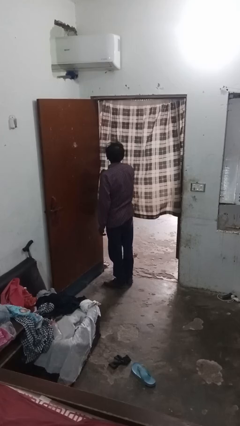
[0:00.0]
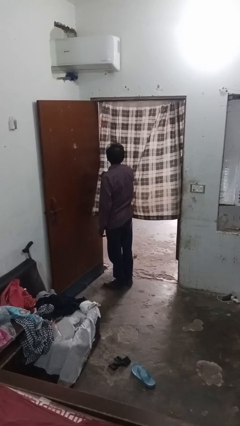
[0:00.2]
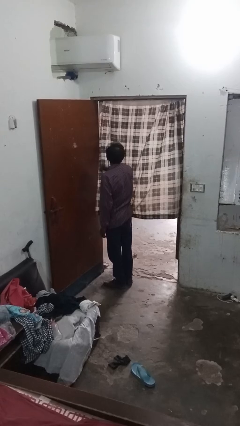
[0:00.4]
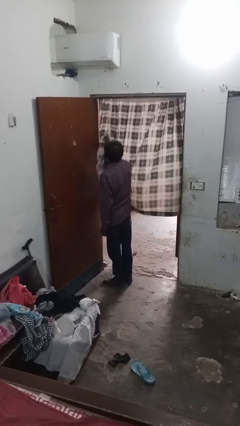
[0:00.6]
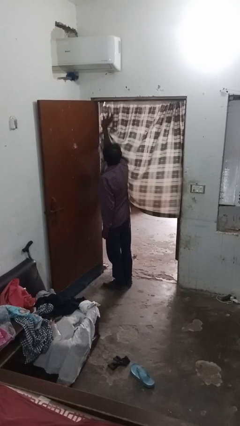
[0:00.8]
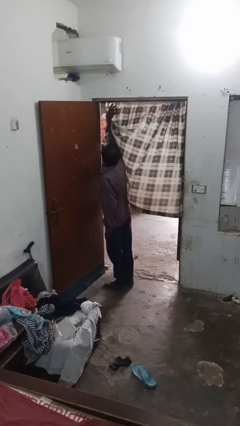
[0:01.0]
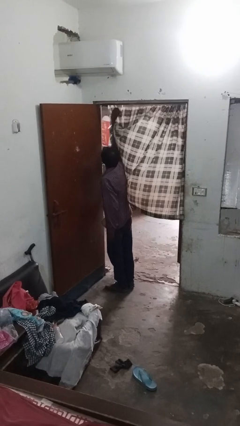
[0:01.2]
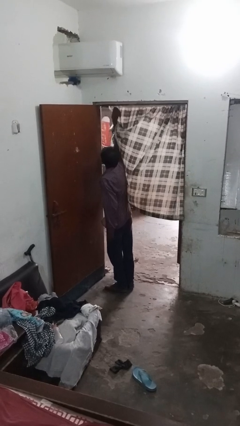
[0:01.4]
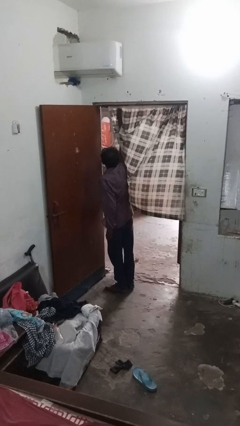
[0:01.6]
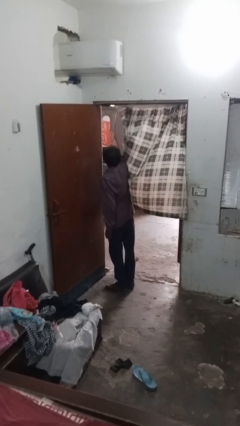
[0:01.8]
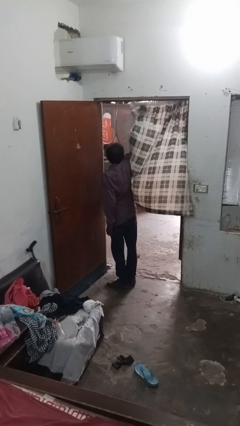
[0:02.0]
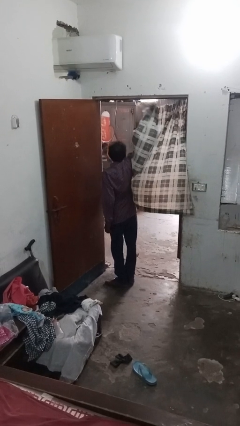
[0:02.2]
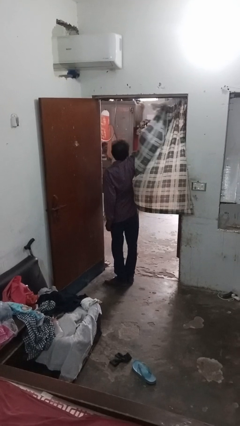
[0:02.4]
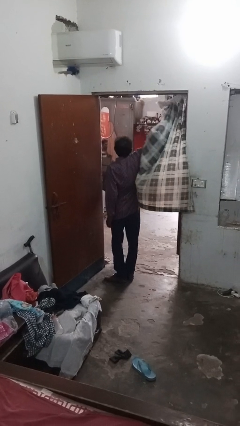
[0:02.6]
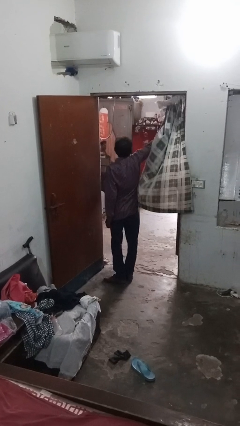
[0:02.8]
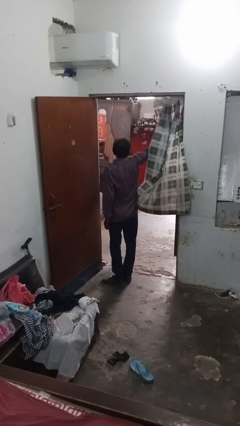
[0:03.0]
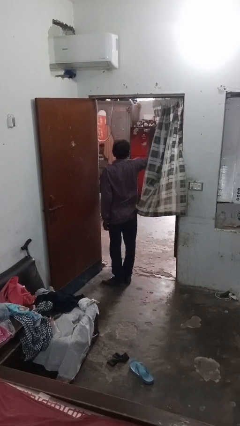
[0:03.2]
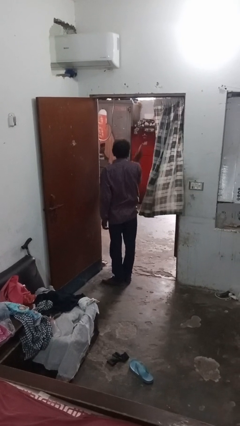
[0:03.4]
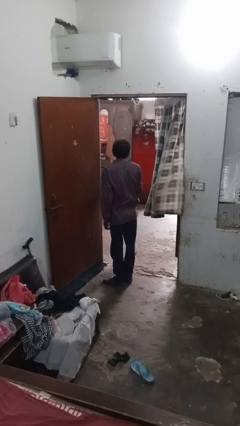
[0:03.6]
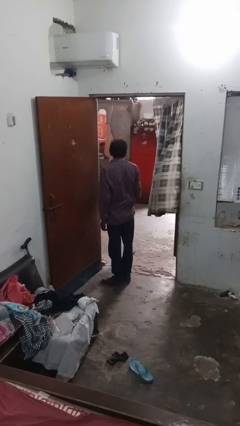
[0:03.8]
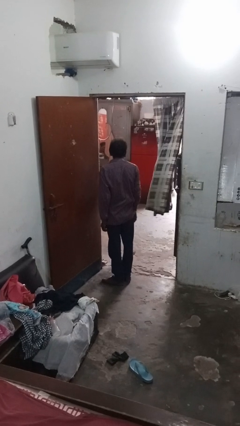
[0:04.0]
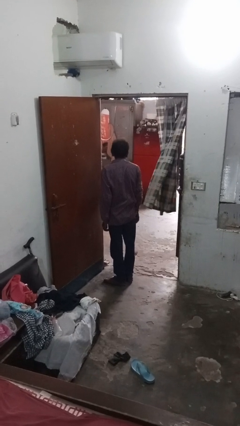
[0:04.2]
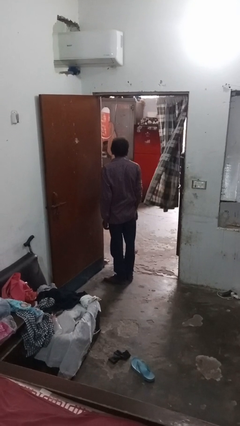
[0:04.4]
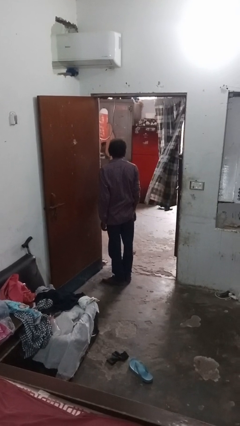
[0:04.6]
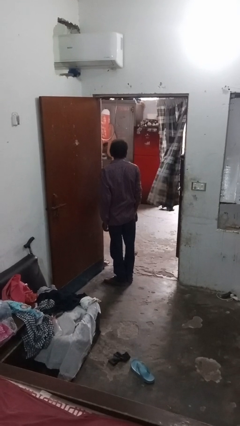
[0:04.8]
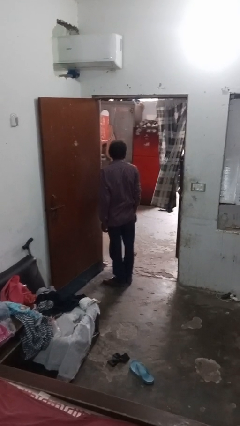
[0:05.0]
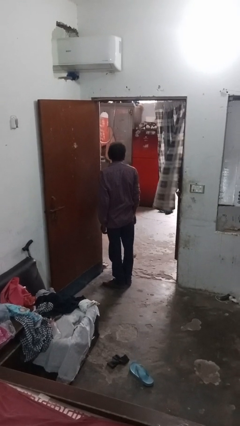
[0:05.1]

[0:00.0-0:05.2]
person opens curtains

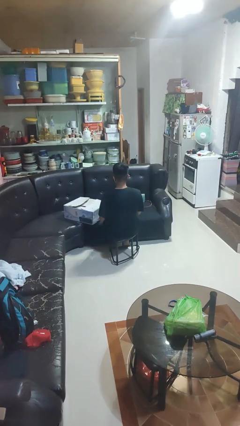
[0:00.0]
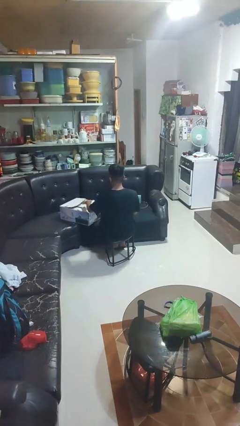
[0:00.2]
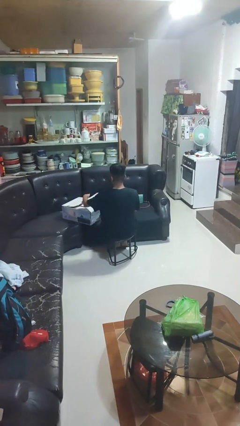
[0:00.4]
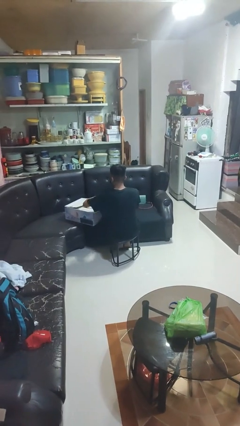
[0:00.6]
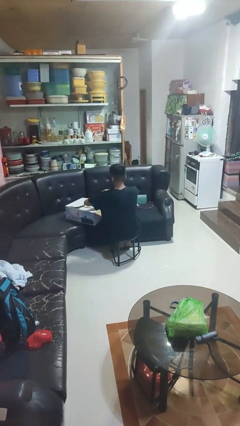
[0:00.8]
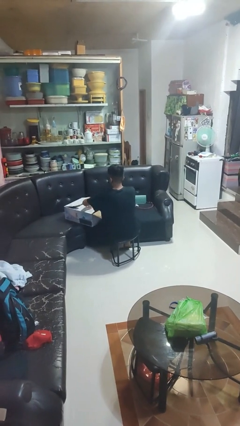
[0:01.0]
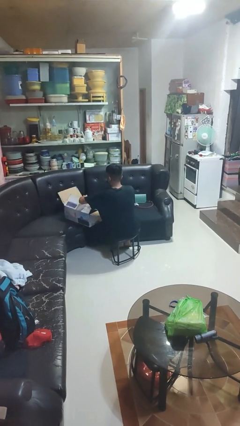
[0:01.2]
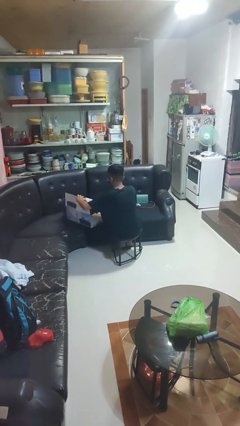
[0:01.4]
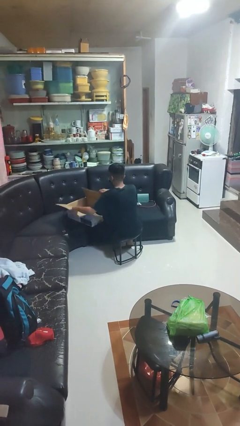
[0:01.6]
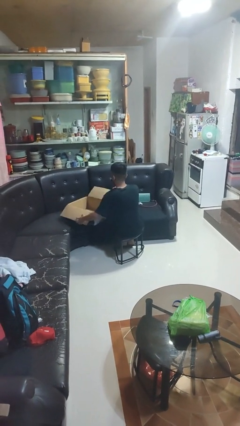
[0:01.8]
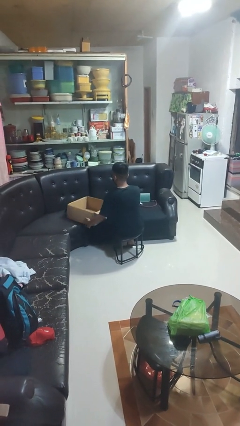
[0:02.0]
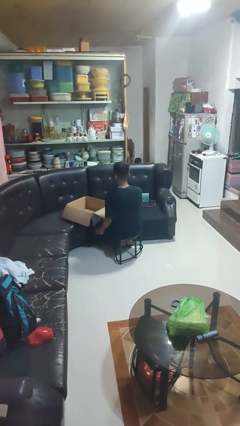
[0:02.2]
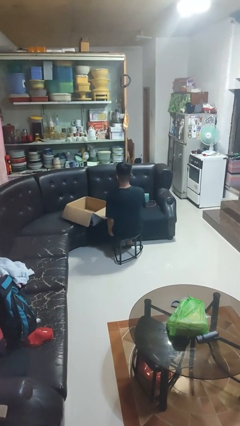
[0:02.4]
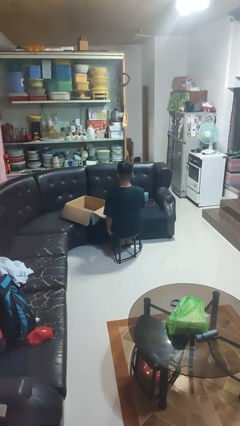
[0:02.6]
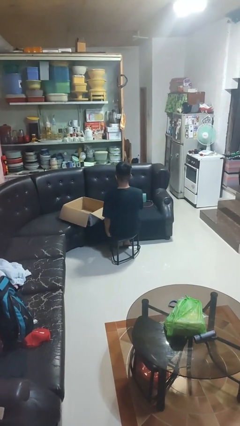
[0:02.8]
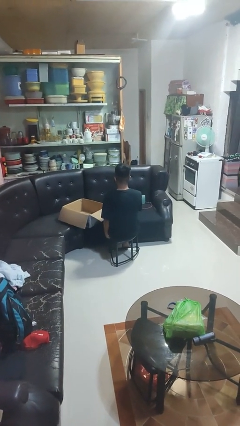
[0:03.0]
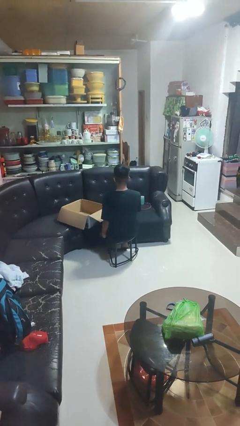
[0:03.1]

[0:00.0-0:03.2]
person opens box

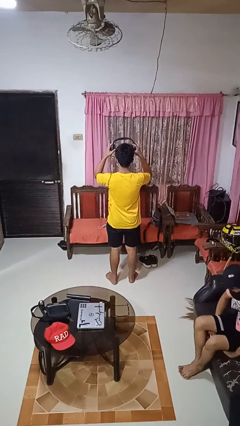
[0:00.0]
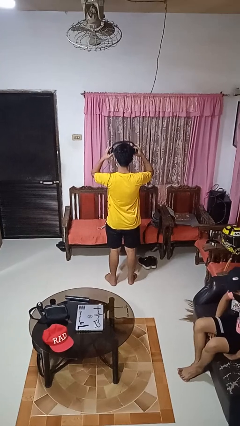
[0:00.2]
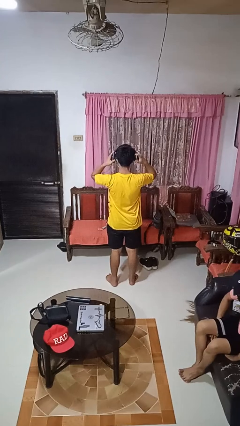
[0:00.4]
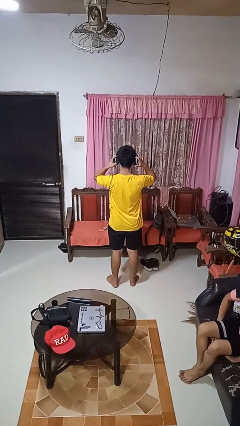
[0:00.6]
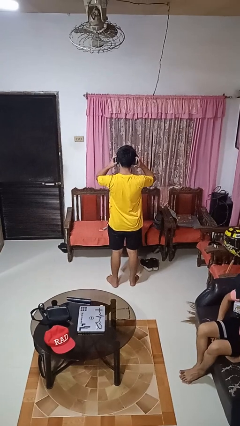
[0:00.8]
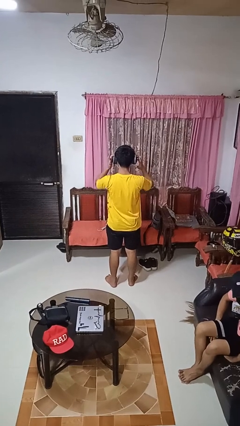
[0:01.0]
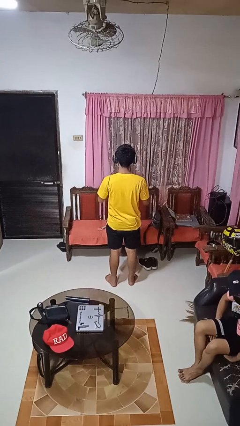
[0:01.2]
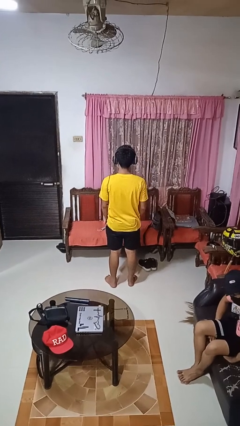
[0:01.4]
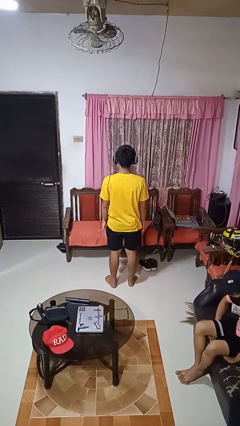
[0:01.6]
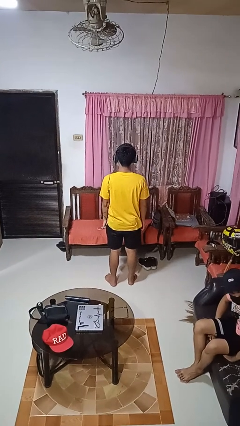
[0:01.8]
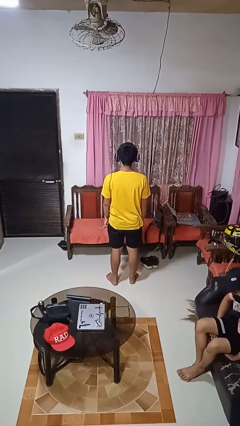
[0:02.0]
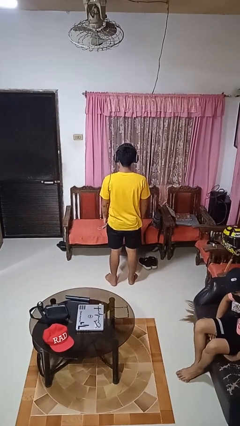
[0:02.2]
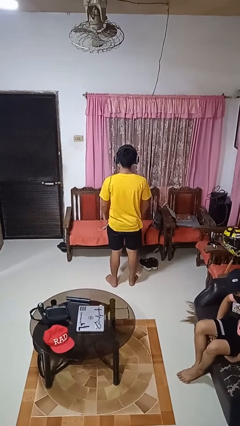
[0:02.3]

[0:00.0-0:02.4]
person puts on headphones

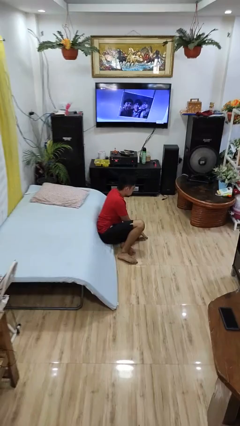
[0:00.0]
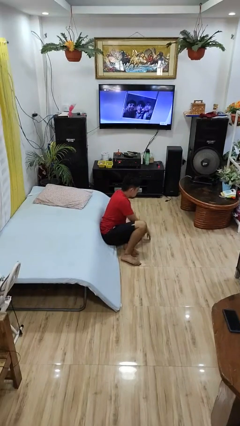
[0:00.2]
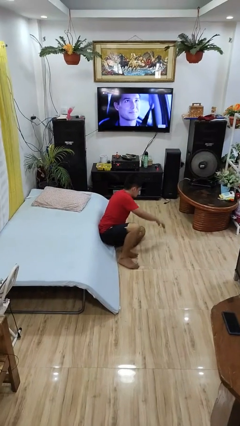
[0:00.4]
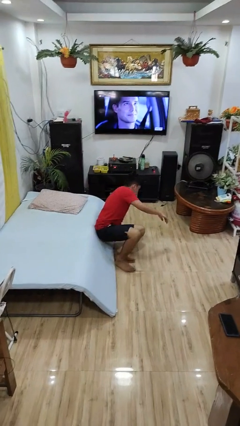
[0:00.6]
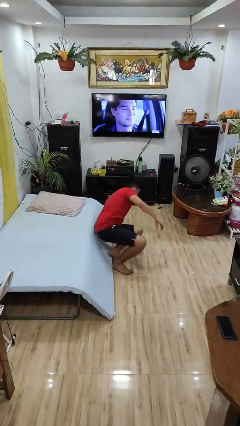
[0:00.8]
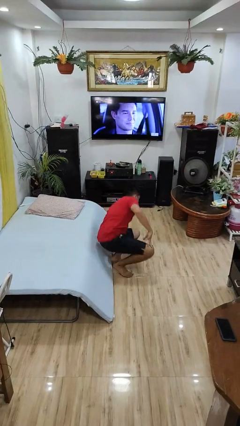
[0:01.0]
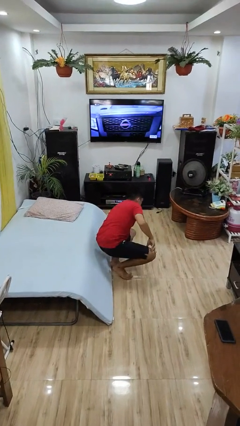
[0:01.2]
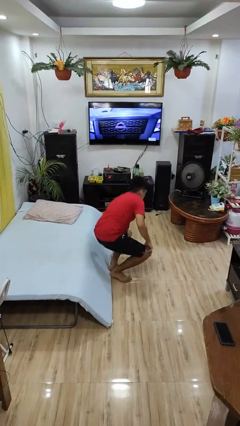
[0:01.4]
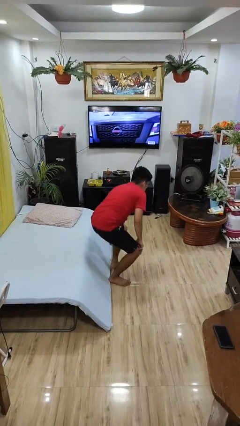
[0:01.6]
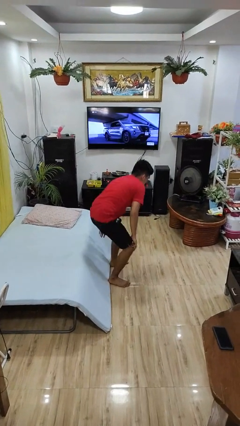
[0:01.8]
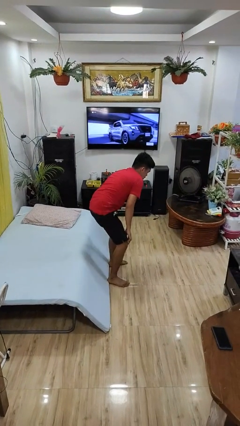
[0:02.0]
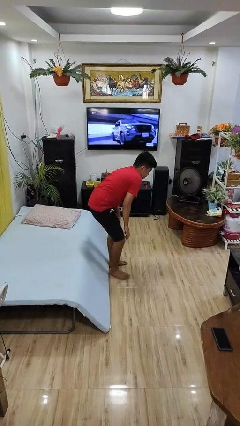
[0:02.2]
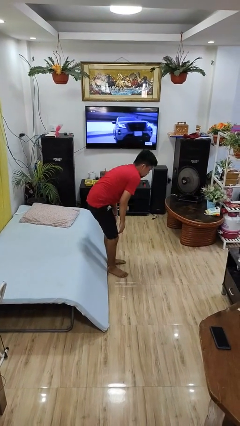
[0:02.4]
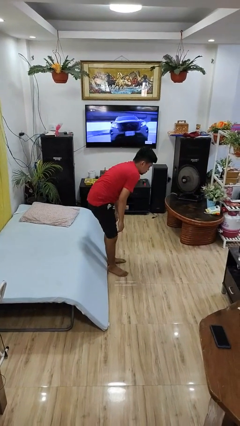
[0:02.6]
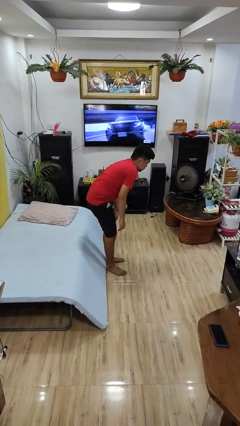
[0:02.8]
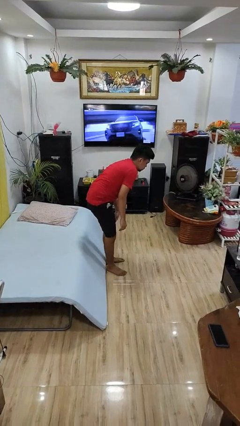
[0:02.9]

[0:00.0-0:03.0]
person stands up from floor

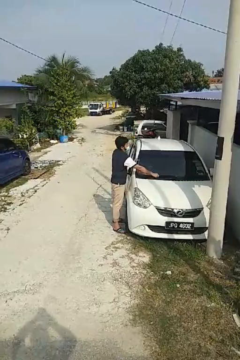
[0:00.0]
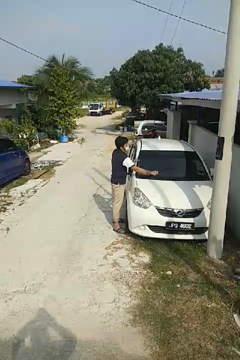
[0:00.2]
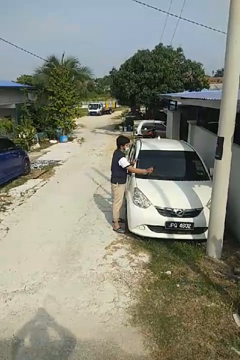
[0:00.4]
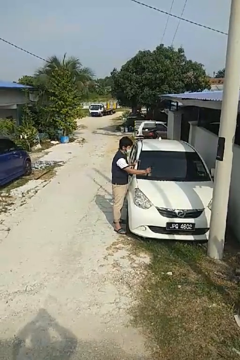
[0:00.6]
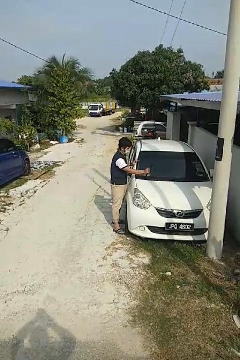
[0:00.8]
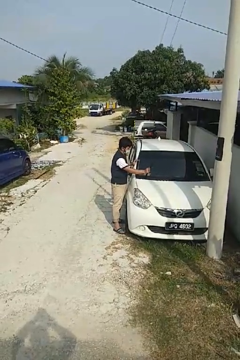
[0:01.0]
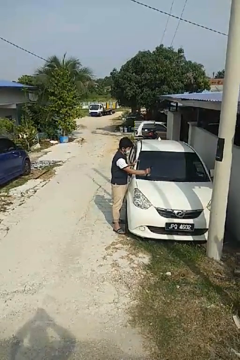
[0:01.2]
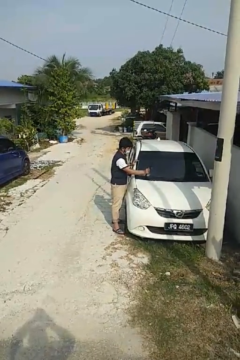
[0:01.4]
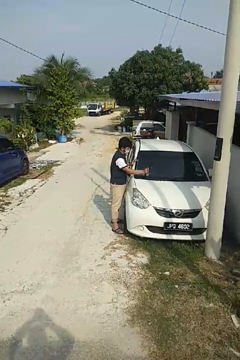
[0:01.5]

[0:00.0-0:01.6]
person flips up car wipers

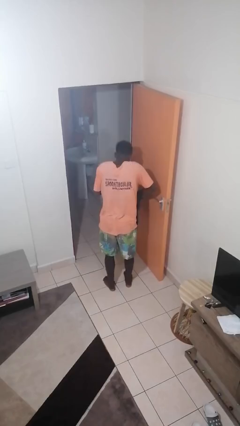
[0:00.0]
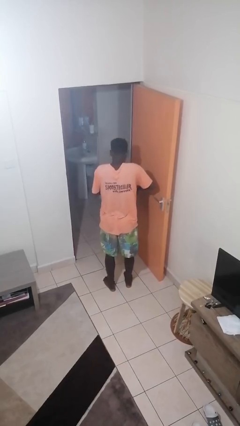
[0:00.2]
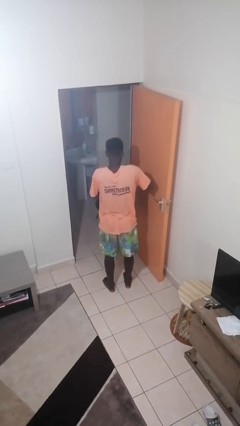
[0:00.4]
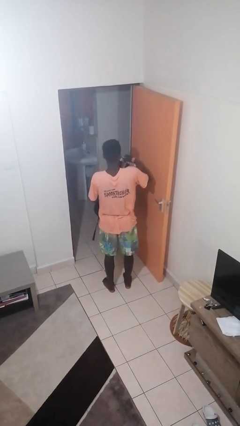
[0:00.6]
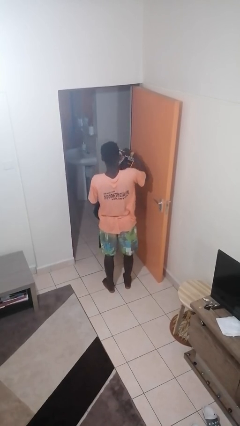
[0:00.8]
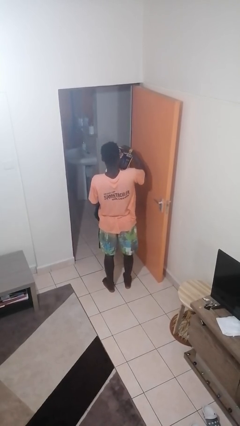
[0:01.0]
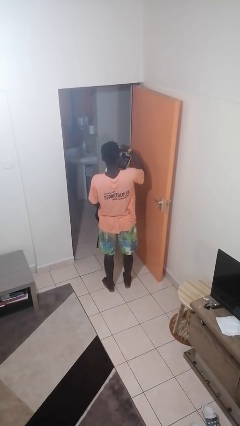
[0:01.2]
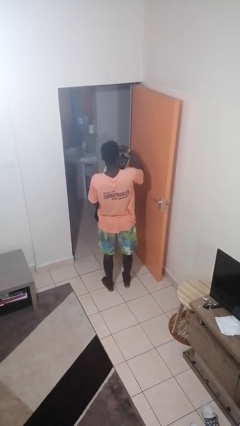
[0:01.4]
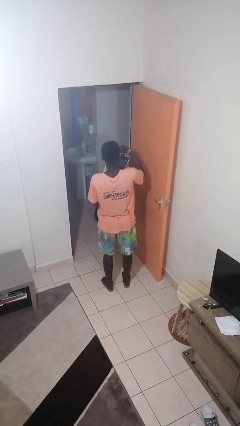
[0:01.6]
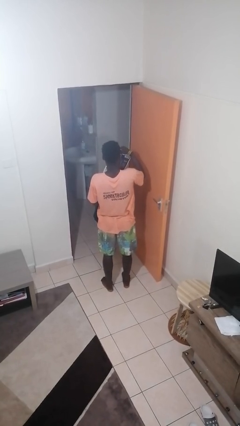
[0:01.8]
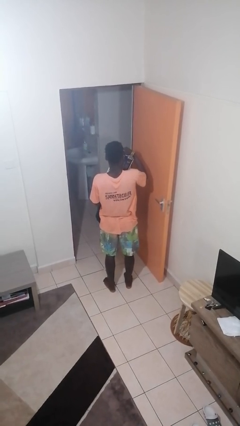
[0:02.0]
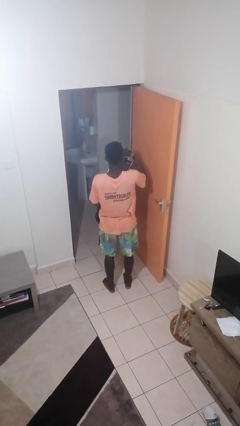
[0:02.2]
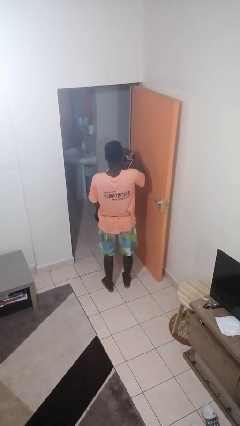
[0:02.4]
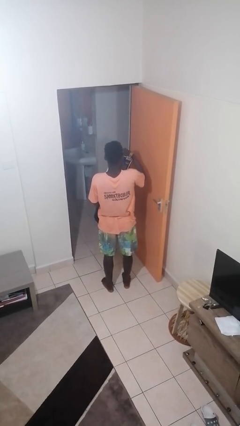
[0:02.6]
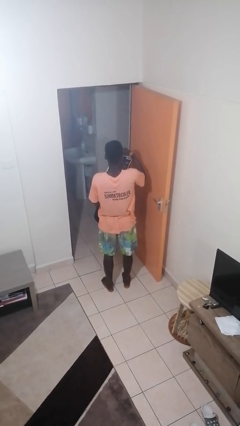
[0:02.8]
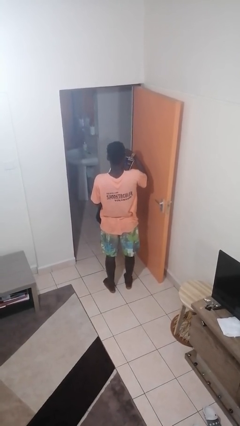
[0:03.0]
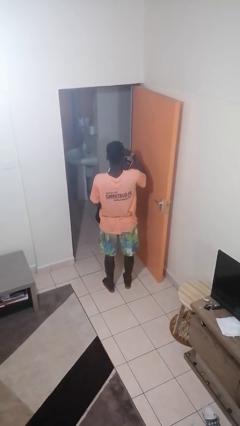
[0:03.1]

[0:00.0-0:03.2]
person takes object from backpack
